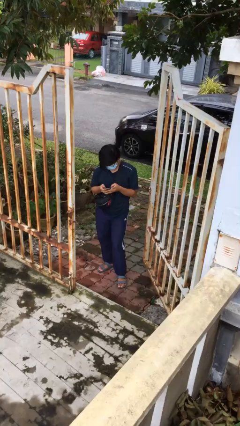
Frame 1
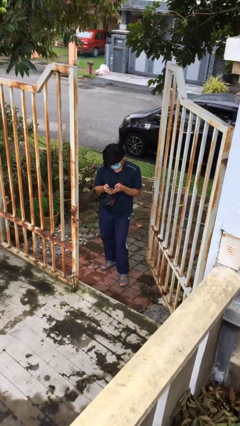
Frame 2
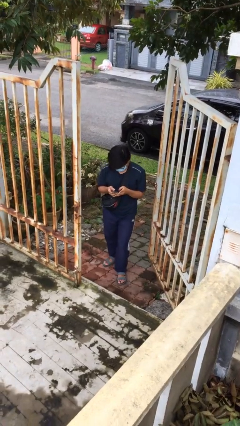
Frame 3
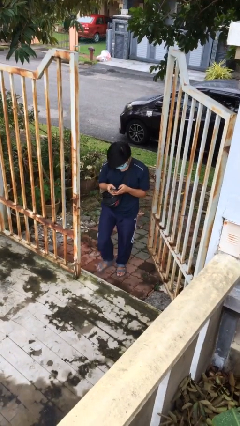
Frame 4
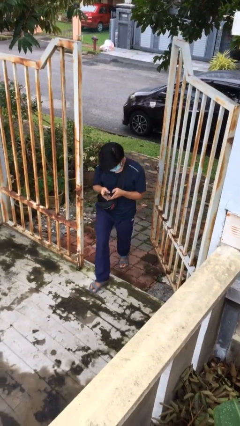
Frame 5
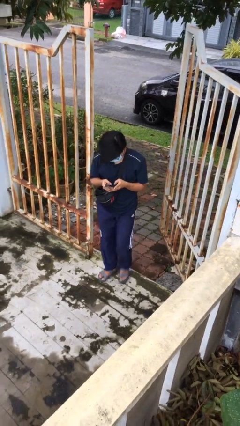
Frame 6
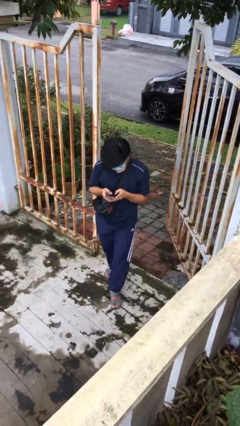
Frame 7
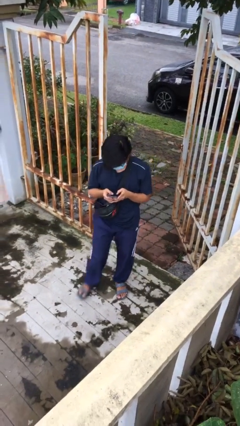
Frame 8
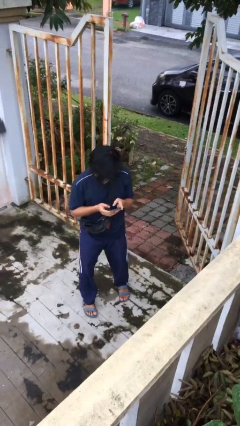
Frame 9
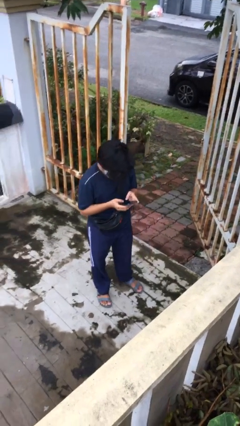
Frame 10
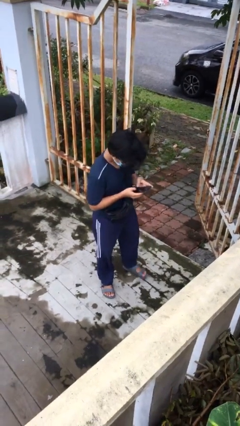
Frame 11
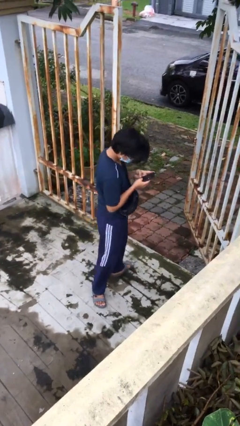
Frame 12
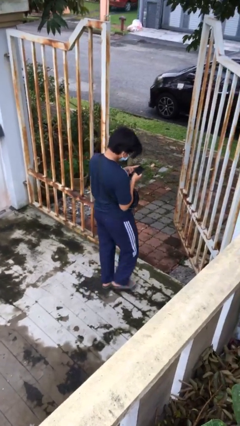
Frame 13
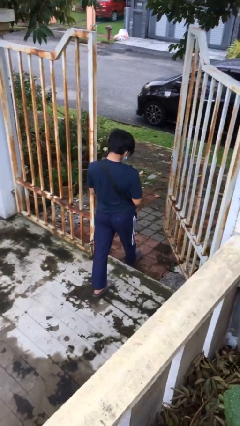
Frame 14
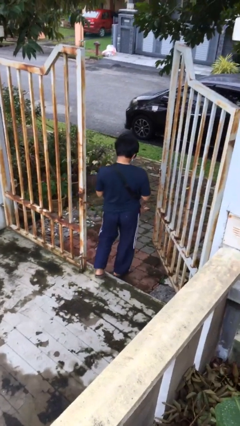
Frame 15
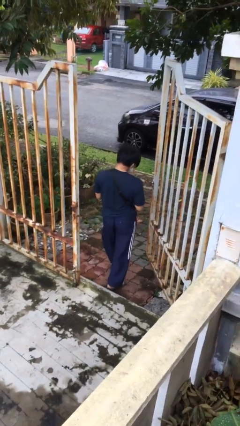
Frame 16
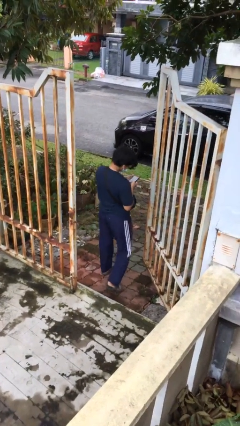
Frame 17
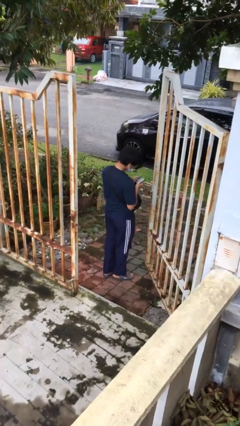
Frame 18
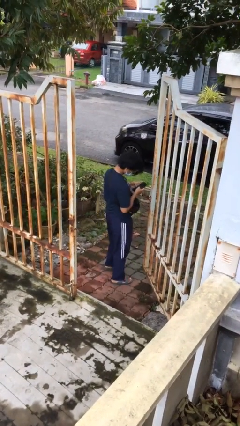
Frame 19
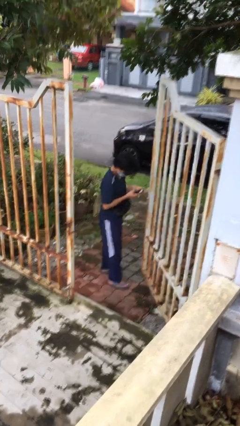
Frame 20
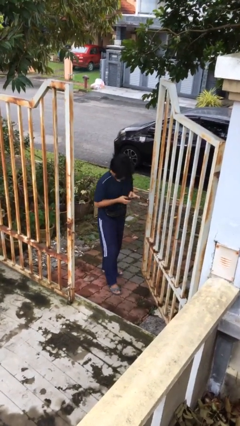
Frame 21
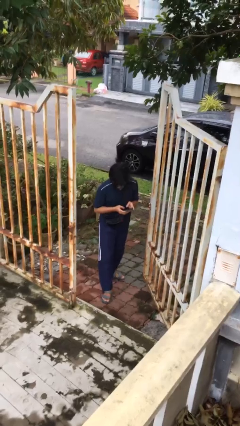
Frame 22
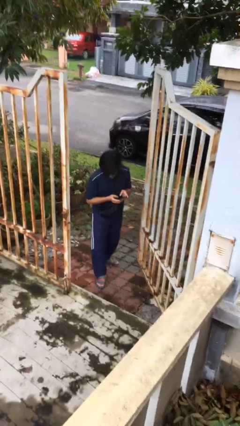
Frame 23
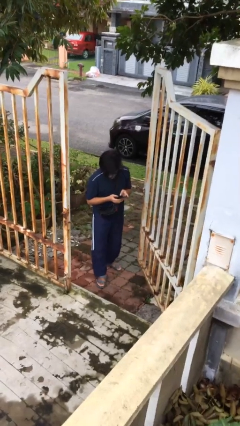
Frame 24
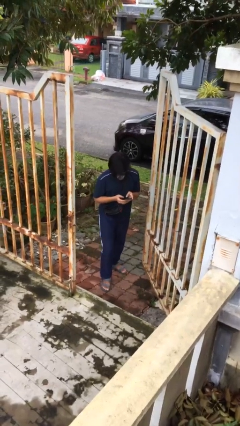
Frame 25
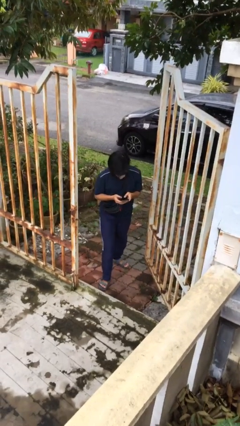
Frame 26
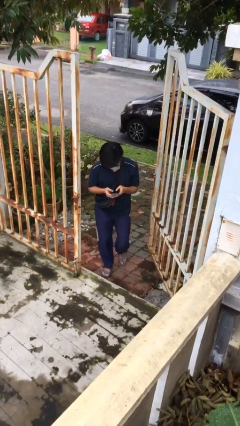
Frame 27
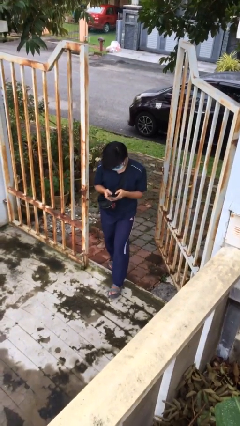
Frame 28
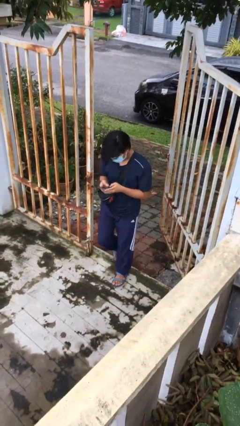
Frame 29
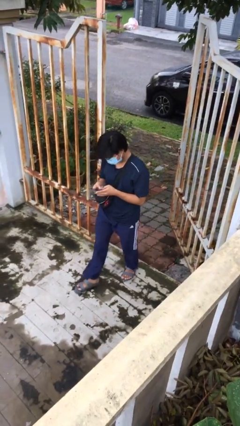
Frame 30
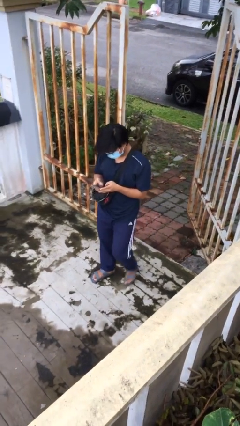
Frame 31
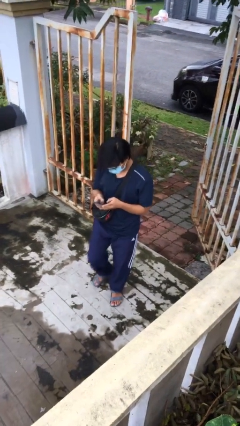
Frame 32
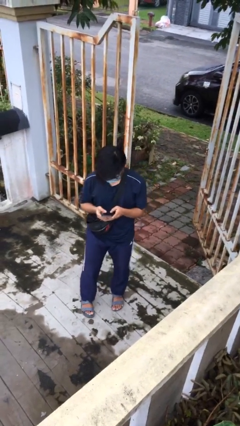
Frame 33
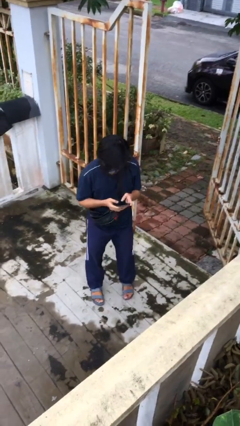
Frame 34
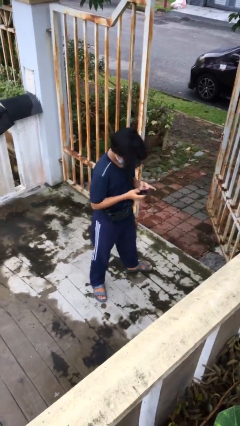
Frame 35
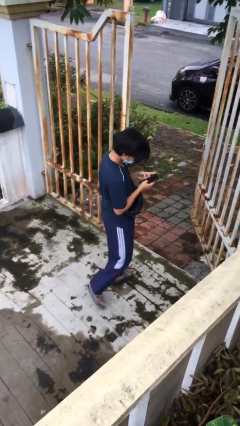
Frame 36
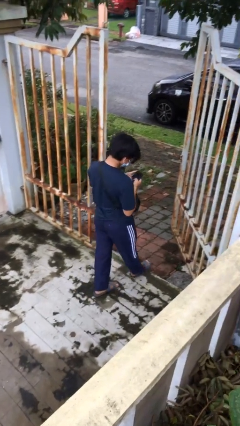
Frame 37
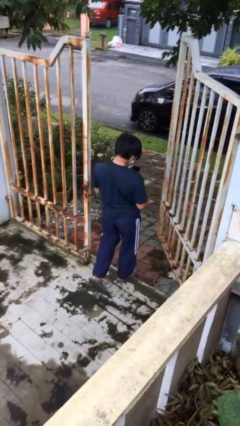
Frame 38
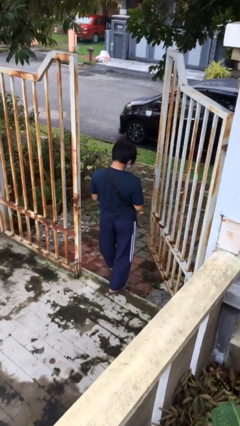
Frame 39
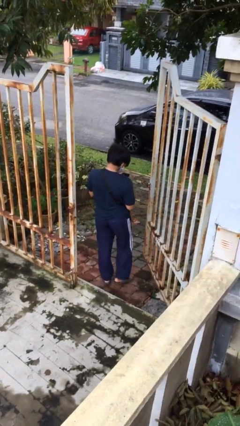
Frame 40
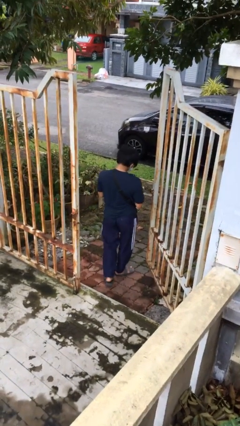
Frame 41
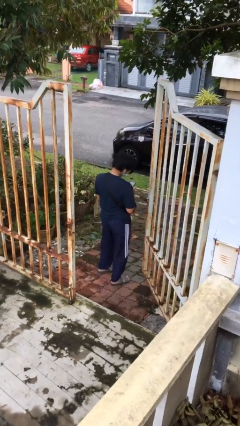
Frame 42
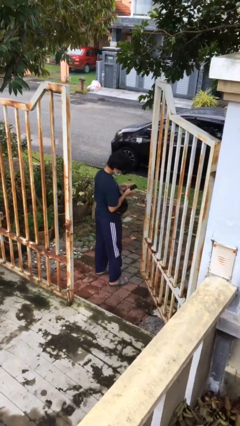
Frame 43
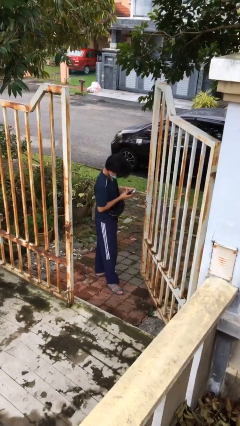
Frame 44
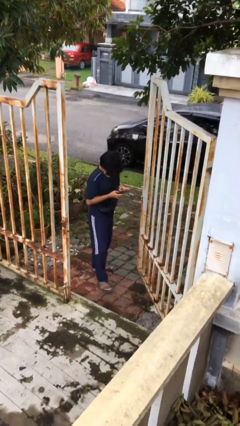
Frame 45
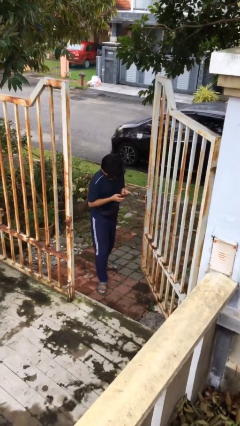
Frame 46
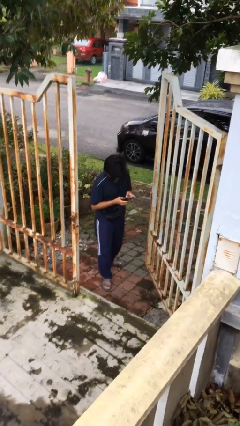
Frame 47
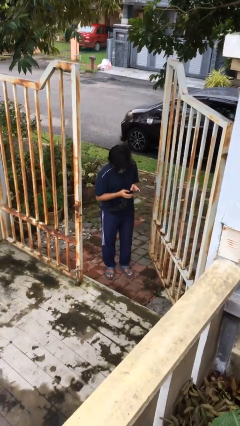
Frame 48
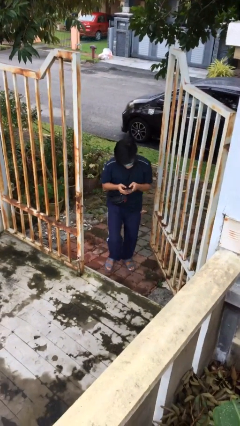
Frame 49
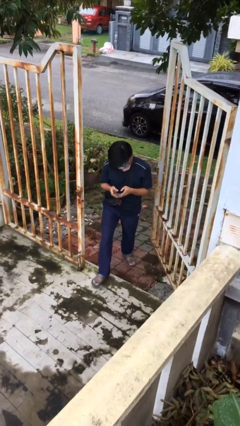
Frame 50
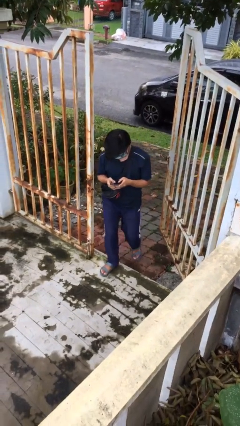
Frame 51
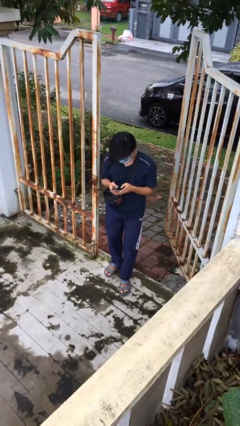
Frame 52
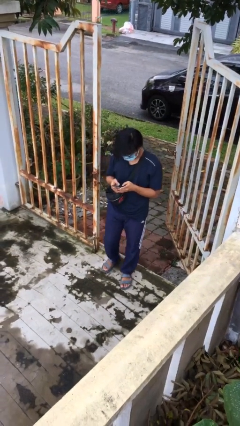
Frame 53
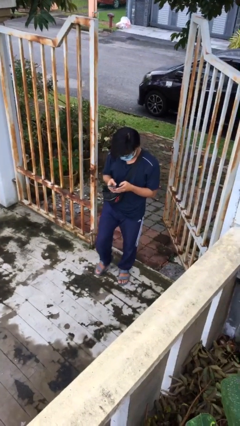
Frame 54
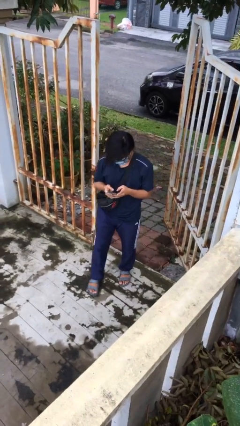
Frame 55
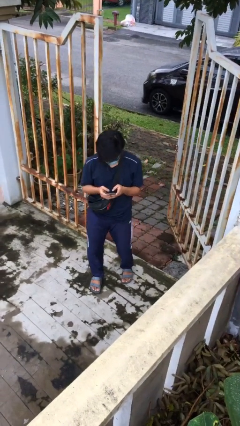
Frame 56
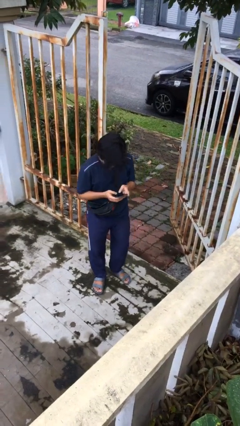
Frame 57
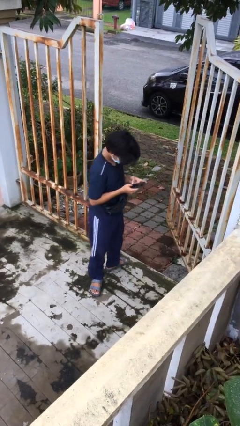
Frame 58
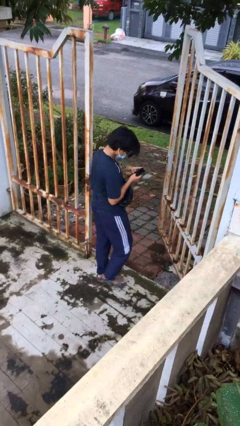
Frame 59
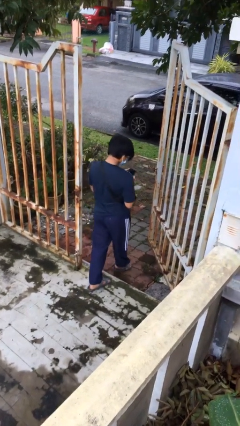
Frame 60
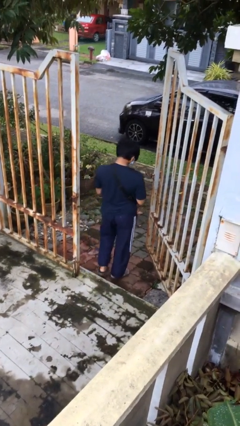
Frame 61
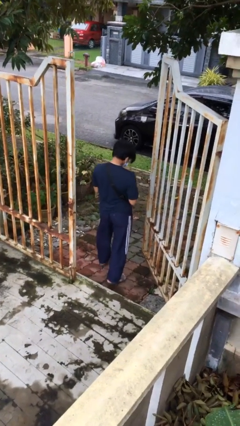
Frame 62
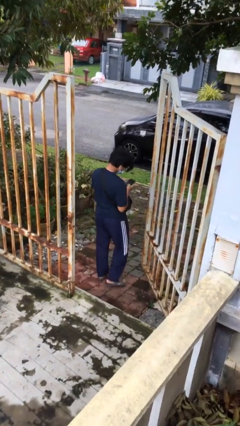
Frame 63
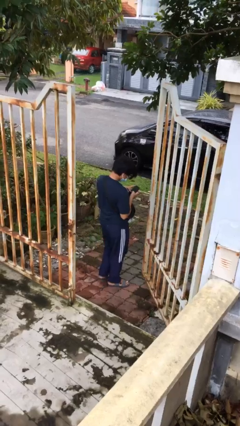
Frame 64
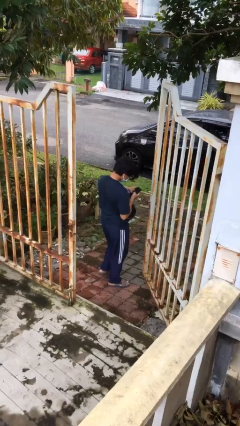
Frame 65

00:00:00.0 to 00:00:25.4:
person texts on phone

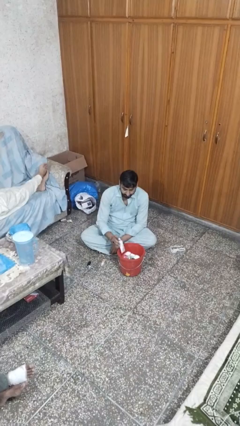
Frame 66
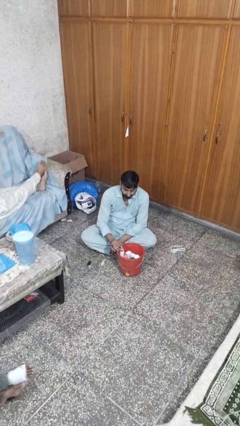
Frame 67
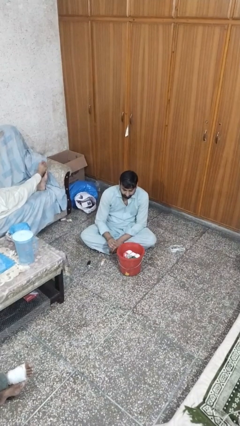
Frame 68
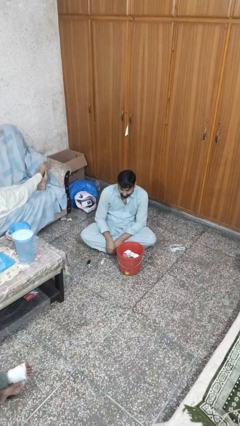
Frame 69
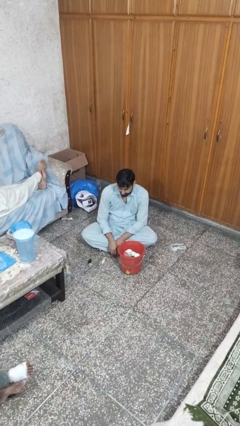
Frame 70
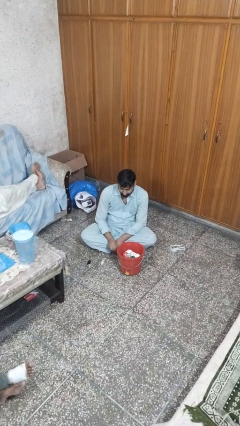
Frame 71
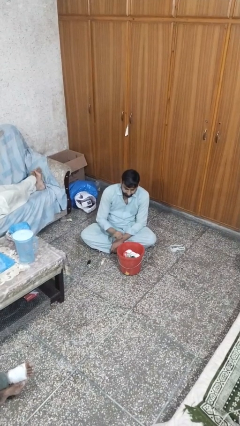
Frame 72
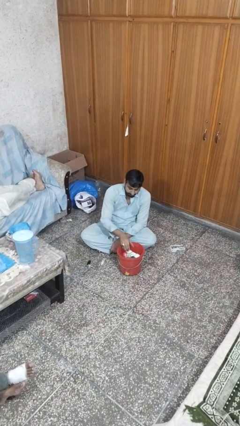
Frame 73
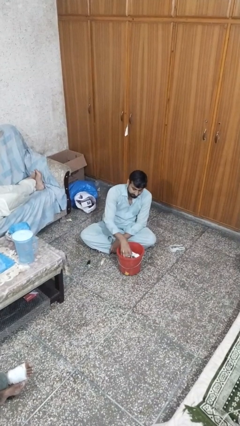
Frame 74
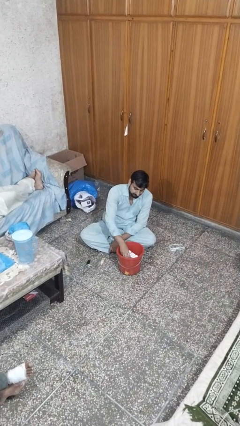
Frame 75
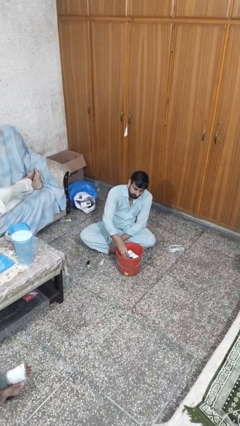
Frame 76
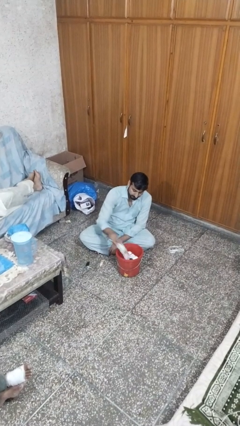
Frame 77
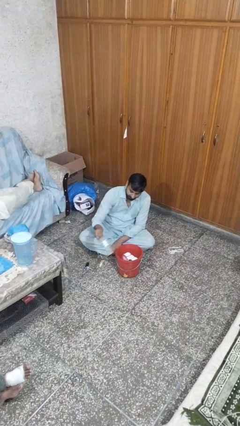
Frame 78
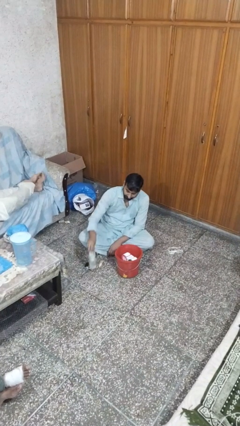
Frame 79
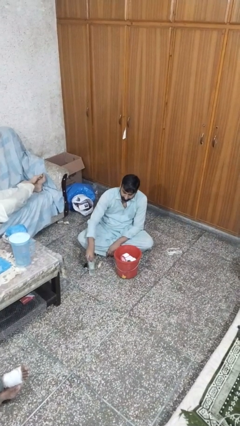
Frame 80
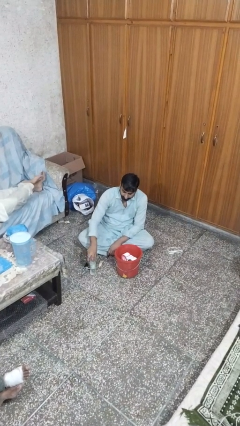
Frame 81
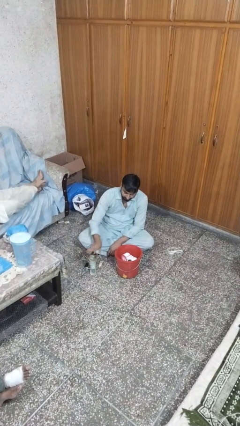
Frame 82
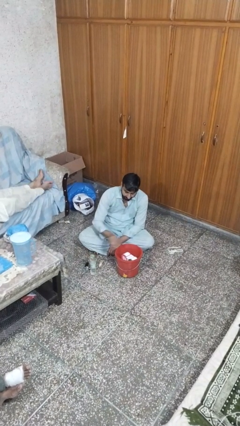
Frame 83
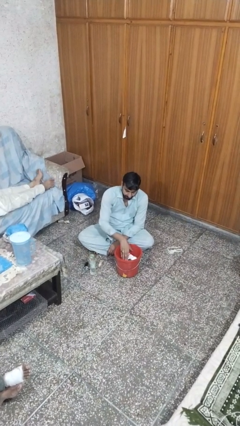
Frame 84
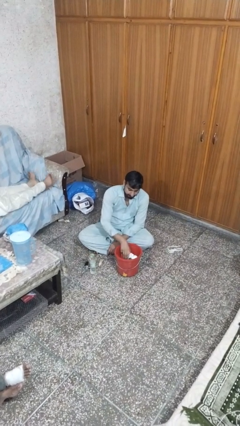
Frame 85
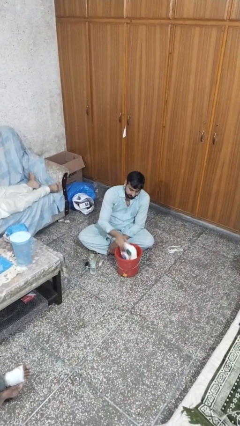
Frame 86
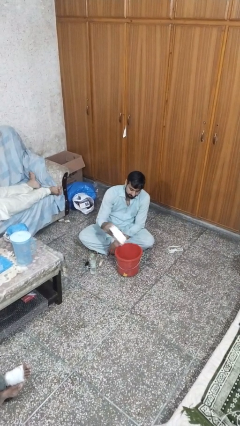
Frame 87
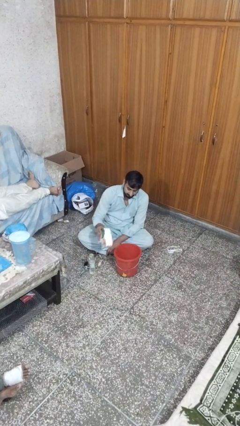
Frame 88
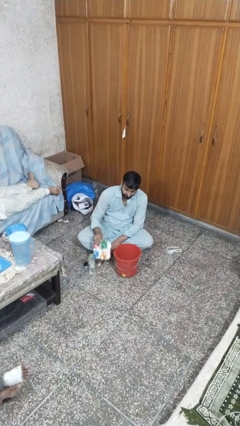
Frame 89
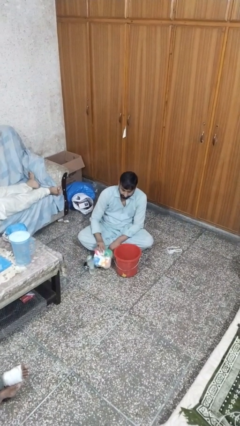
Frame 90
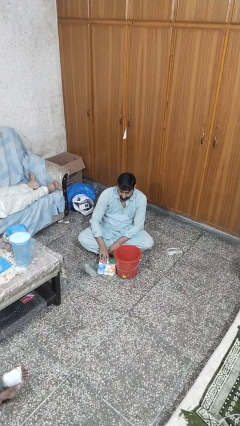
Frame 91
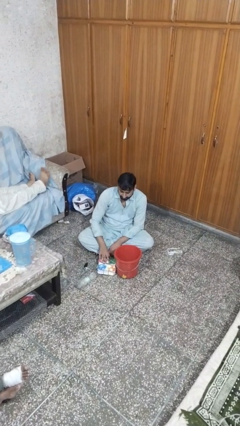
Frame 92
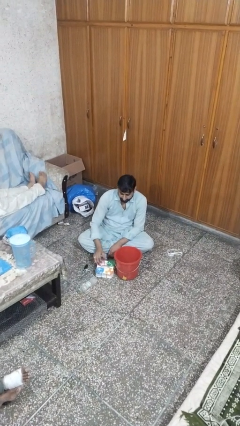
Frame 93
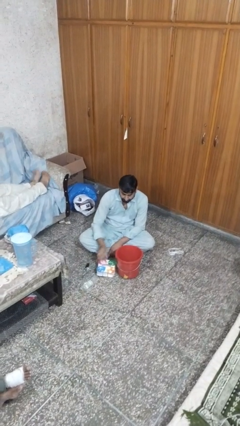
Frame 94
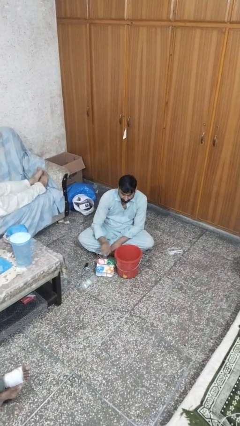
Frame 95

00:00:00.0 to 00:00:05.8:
person takes object from basket
